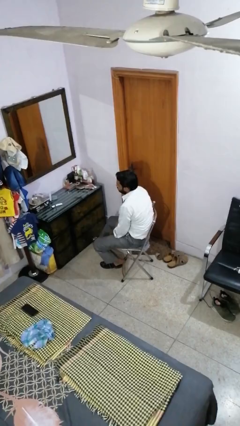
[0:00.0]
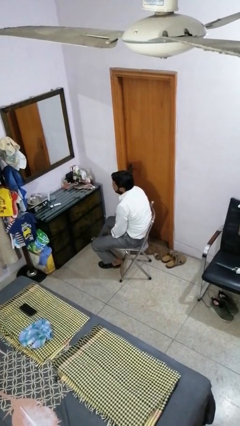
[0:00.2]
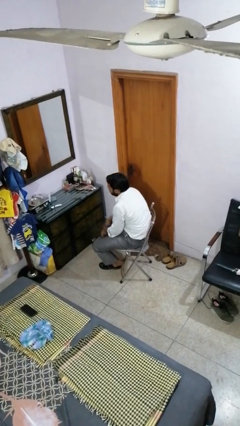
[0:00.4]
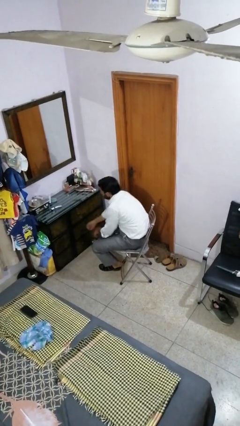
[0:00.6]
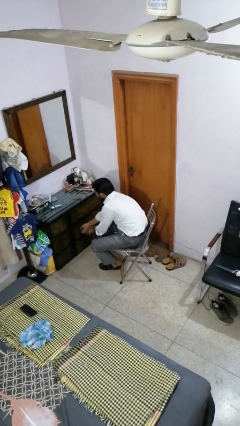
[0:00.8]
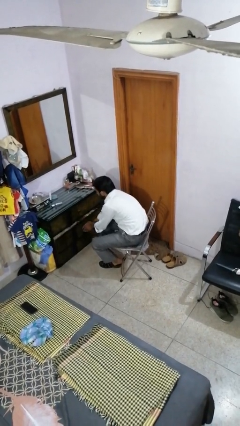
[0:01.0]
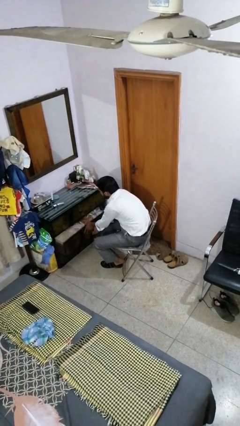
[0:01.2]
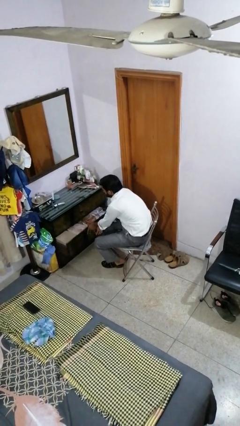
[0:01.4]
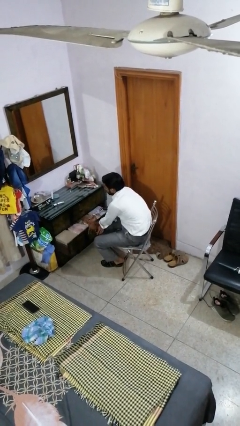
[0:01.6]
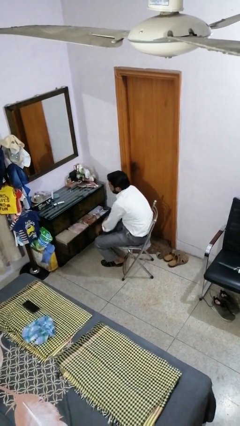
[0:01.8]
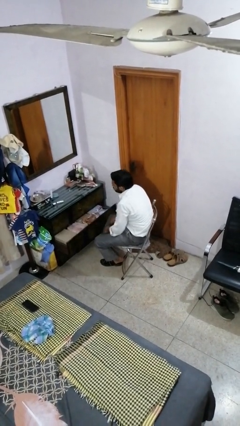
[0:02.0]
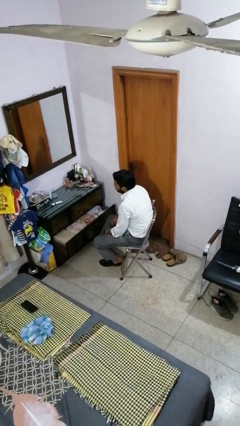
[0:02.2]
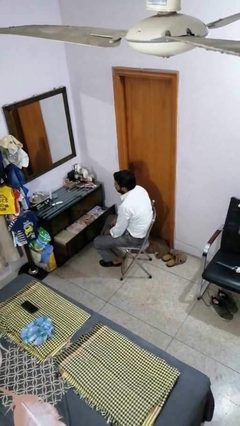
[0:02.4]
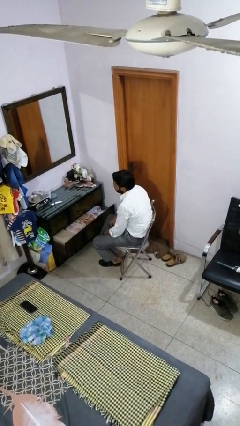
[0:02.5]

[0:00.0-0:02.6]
person opens dresser drawer

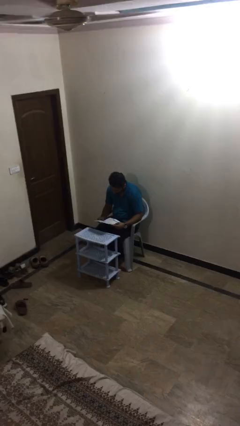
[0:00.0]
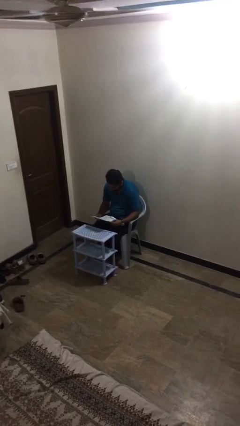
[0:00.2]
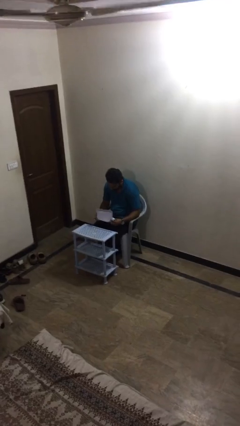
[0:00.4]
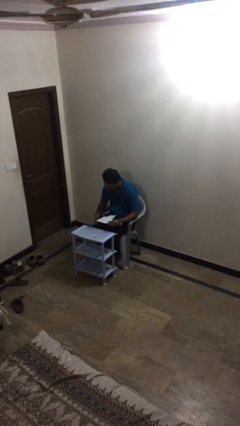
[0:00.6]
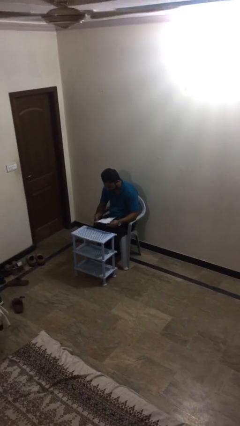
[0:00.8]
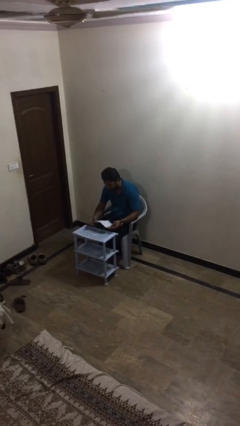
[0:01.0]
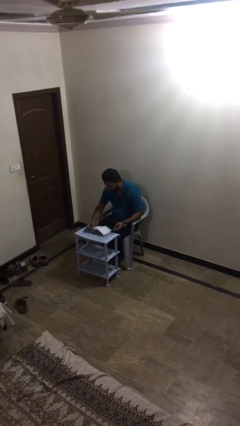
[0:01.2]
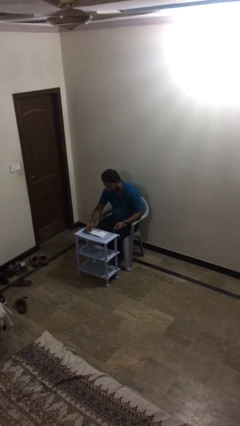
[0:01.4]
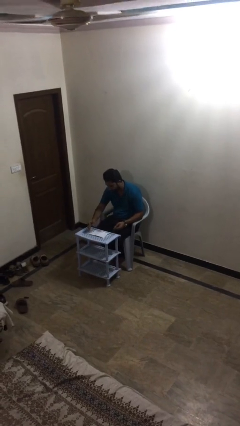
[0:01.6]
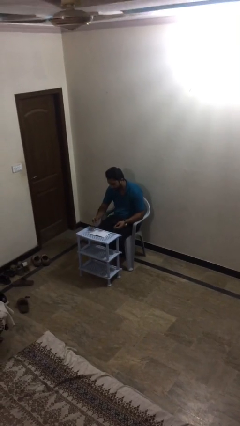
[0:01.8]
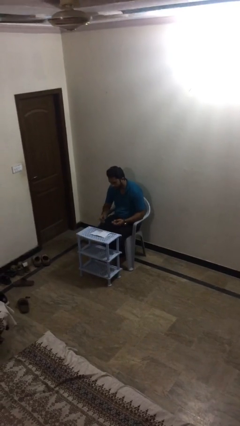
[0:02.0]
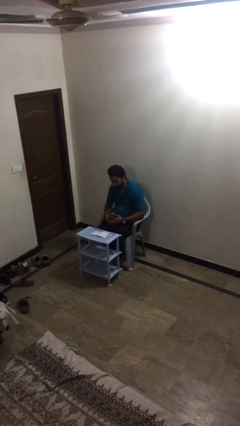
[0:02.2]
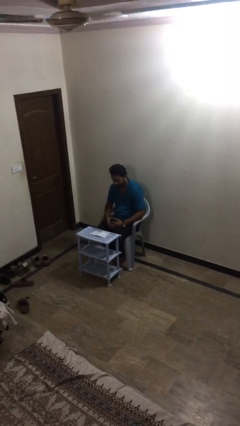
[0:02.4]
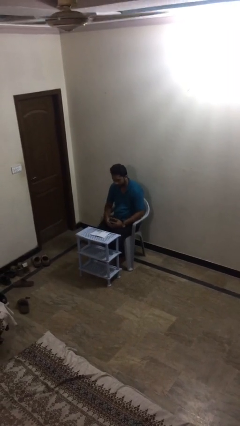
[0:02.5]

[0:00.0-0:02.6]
person puts down object on table

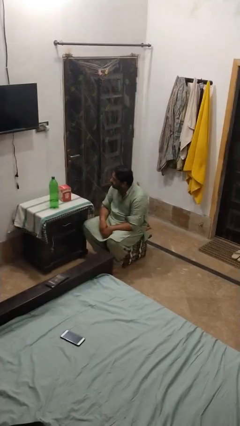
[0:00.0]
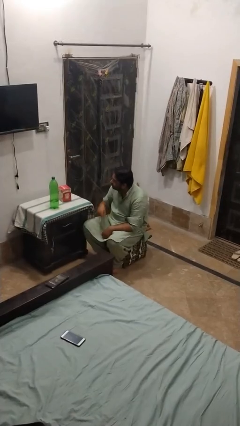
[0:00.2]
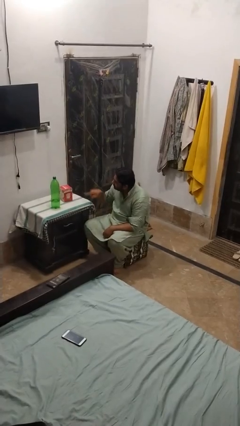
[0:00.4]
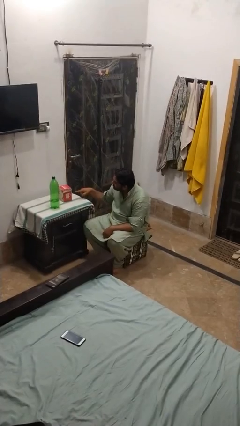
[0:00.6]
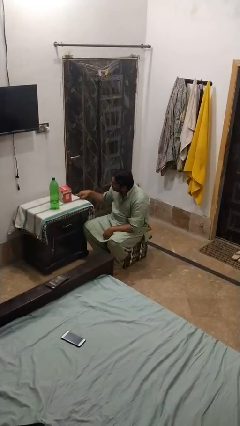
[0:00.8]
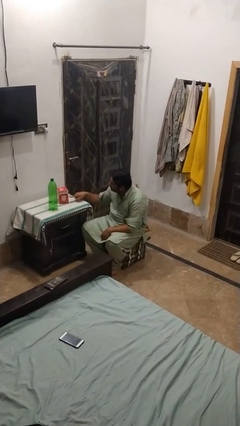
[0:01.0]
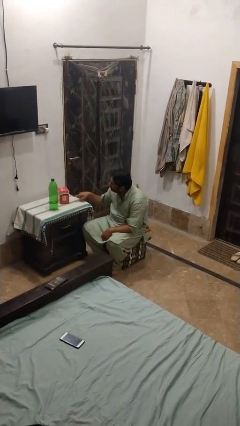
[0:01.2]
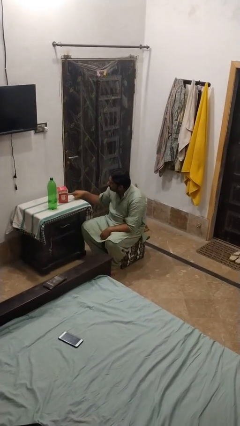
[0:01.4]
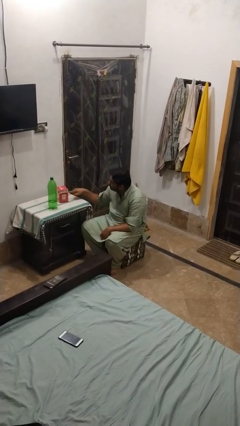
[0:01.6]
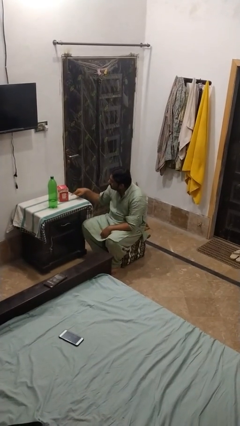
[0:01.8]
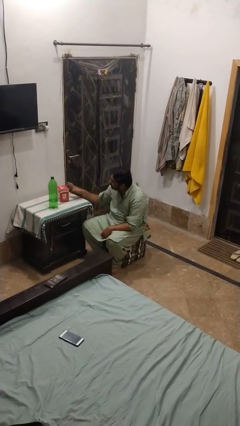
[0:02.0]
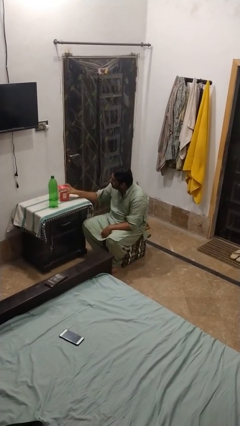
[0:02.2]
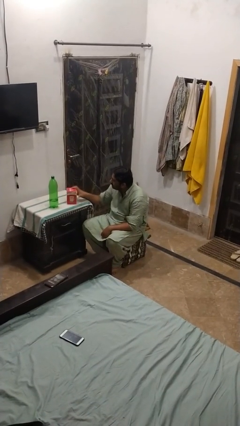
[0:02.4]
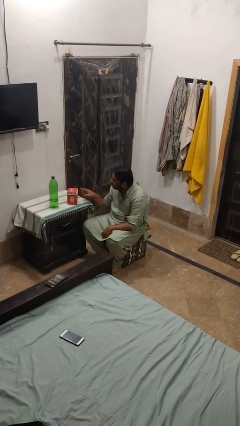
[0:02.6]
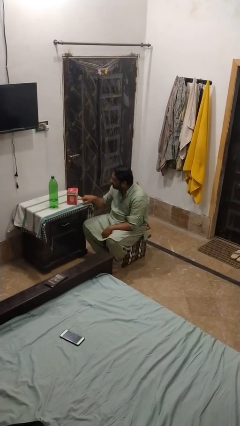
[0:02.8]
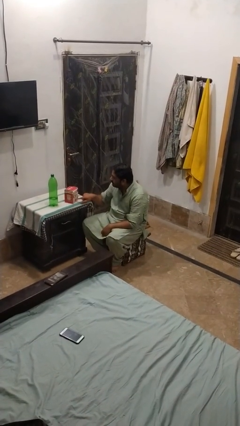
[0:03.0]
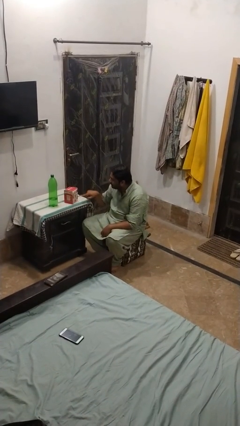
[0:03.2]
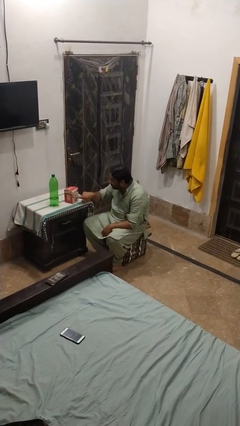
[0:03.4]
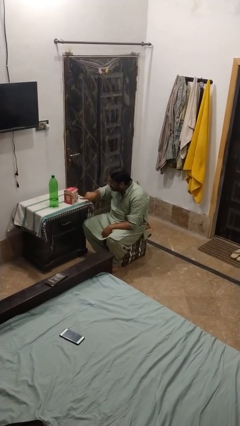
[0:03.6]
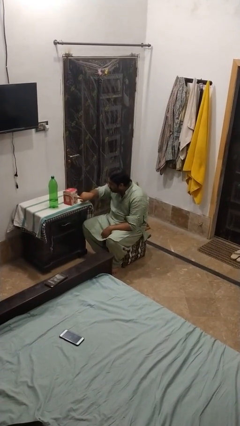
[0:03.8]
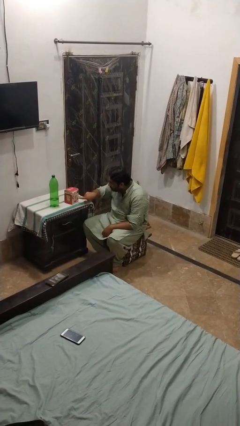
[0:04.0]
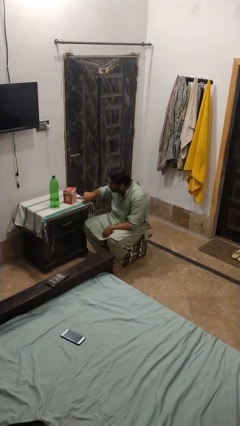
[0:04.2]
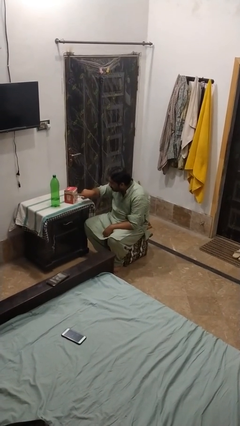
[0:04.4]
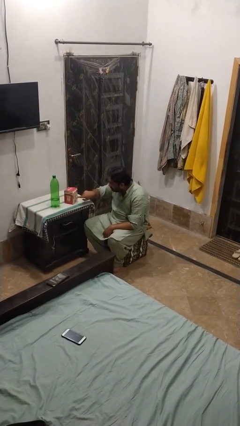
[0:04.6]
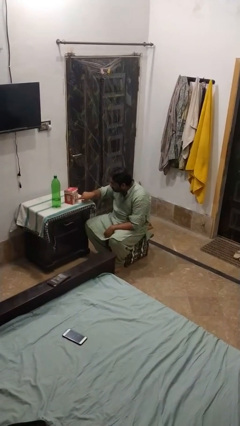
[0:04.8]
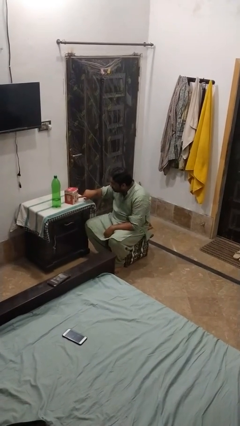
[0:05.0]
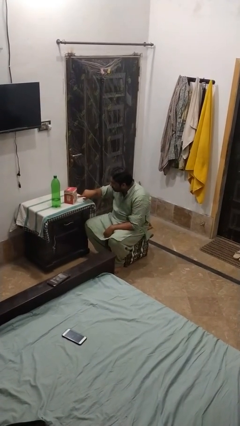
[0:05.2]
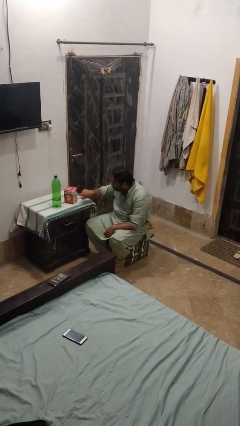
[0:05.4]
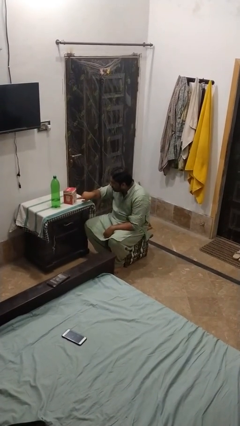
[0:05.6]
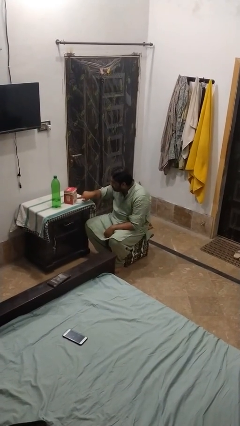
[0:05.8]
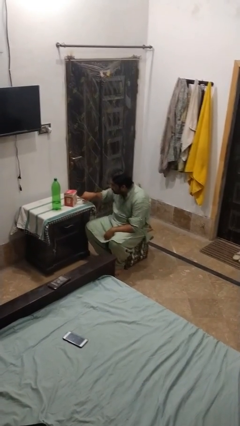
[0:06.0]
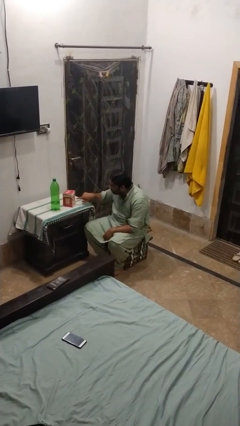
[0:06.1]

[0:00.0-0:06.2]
person taps object with finger

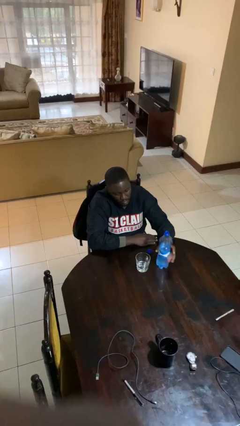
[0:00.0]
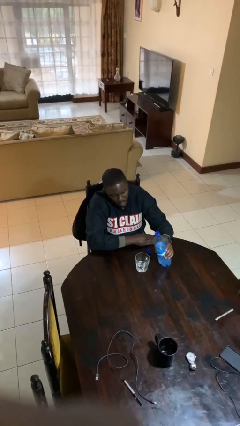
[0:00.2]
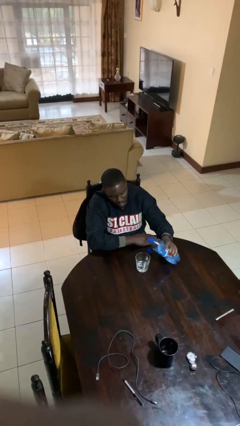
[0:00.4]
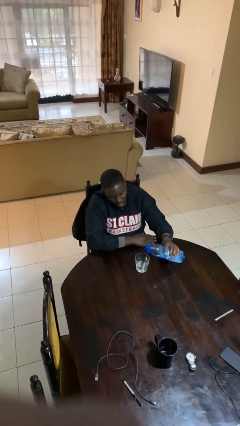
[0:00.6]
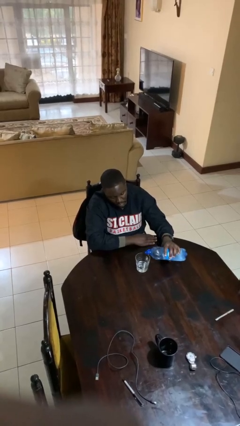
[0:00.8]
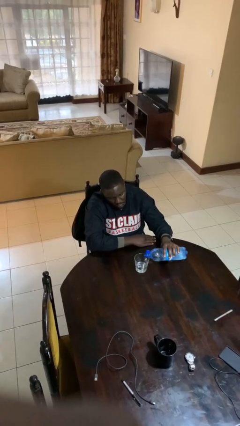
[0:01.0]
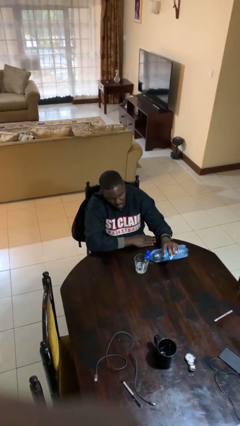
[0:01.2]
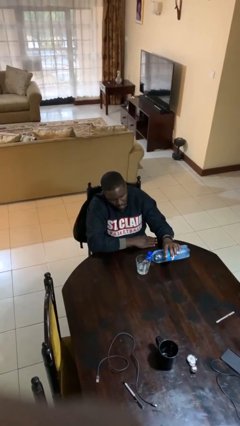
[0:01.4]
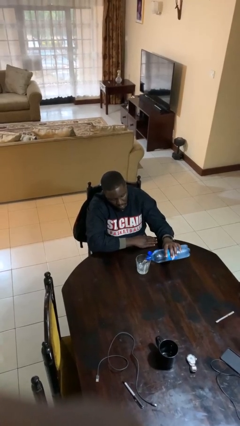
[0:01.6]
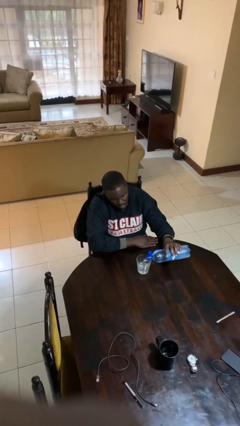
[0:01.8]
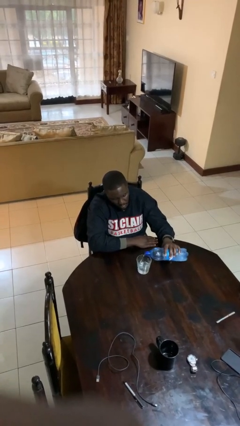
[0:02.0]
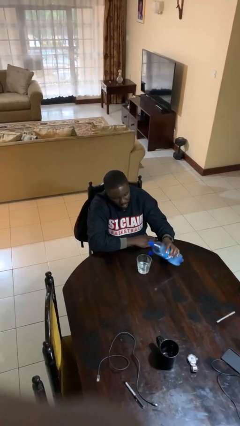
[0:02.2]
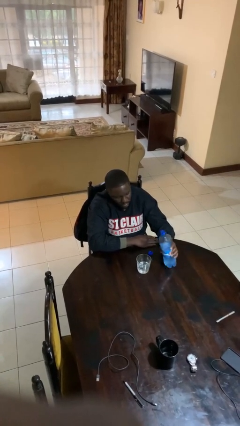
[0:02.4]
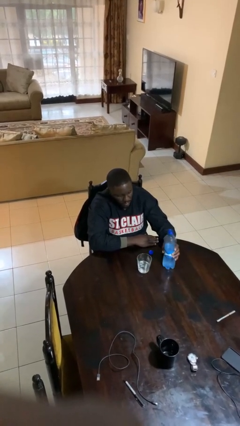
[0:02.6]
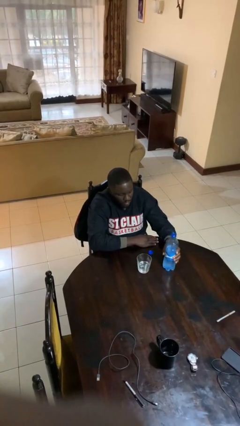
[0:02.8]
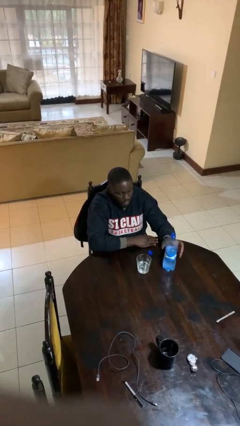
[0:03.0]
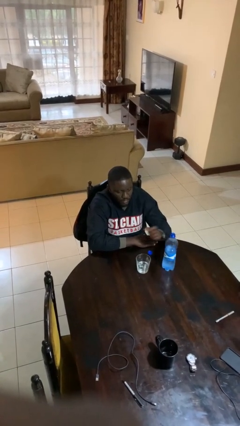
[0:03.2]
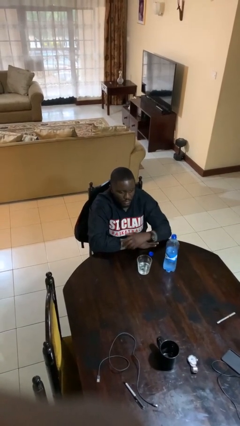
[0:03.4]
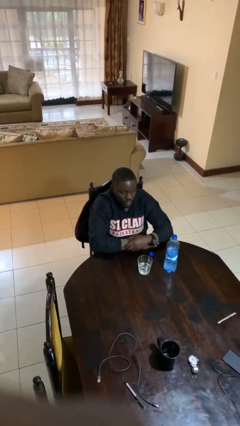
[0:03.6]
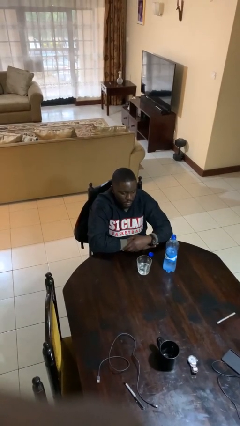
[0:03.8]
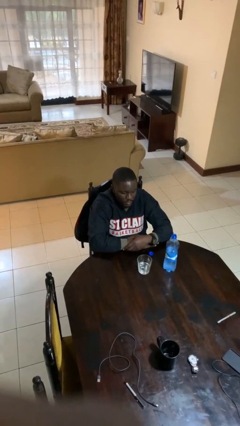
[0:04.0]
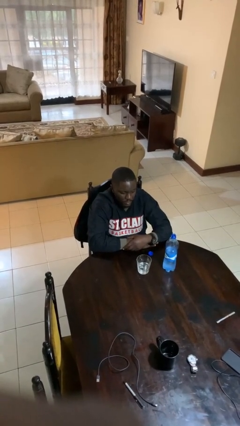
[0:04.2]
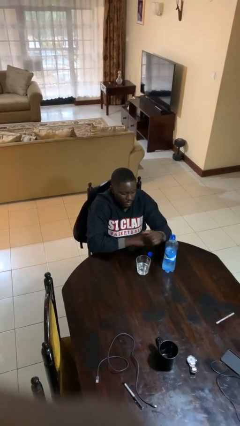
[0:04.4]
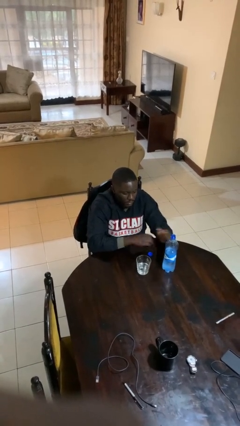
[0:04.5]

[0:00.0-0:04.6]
person pours liquid into cup

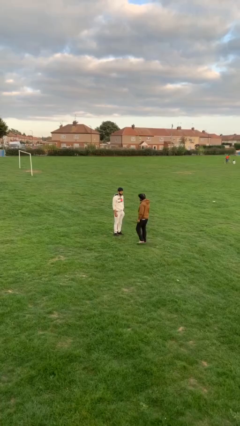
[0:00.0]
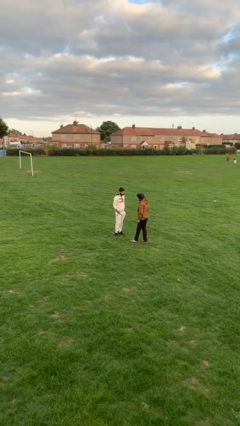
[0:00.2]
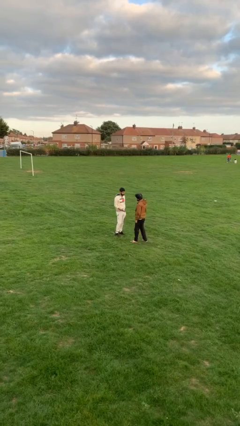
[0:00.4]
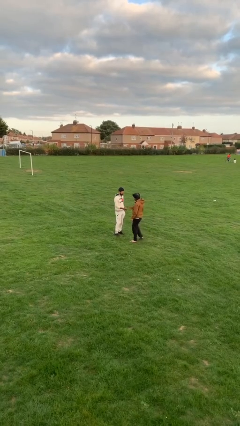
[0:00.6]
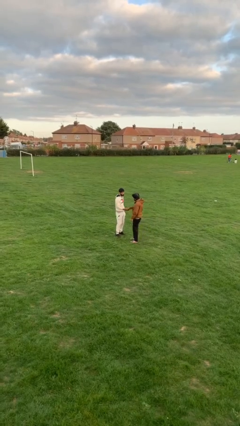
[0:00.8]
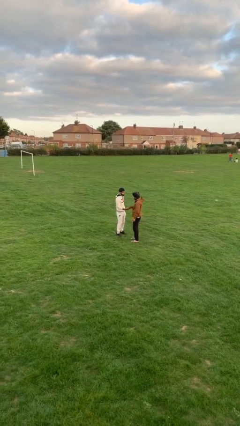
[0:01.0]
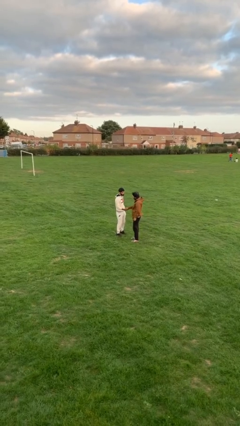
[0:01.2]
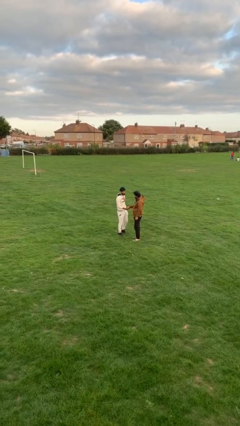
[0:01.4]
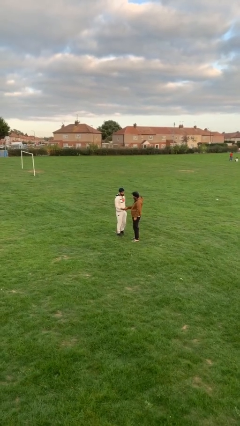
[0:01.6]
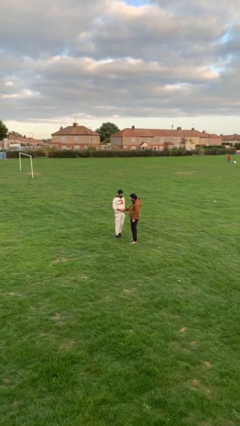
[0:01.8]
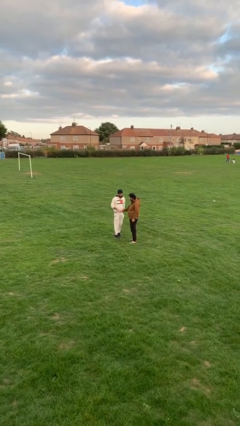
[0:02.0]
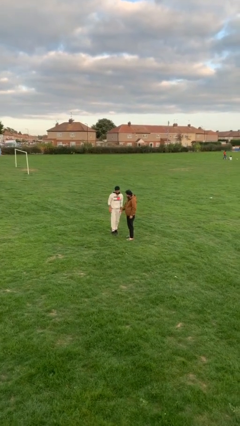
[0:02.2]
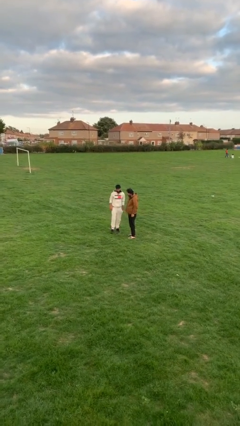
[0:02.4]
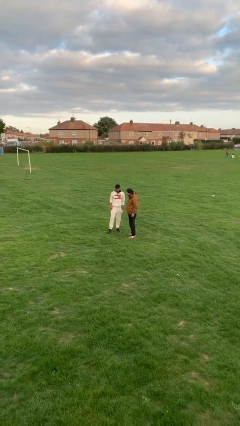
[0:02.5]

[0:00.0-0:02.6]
person shakes hand
